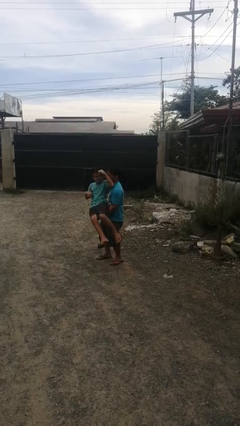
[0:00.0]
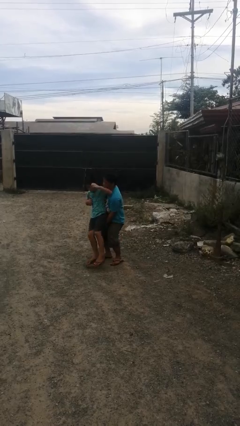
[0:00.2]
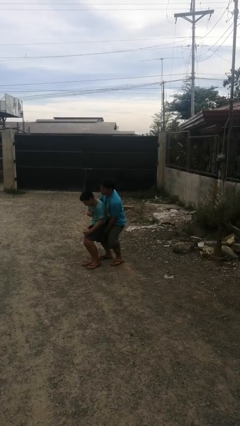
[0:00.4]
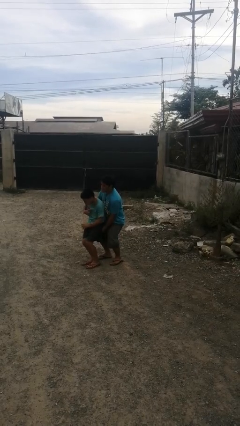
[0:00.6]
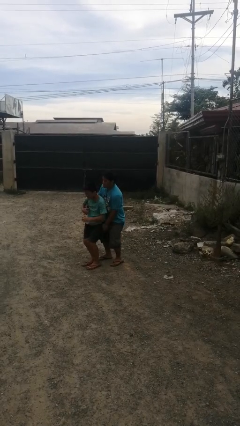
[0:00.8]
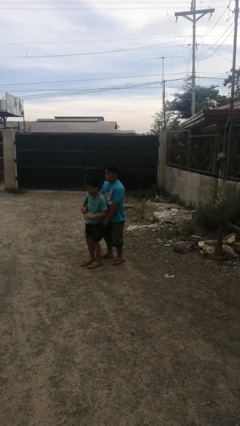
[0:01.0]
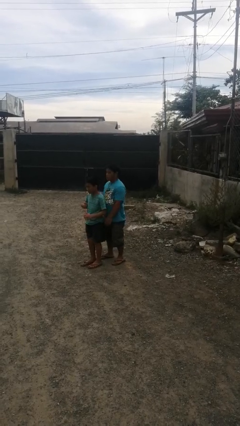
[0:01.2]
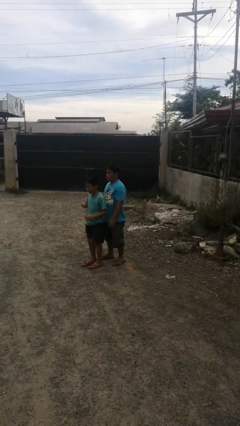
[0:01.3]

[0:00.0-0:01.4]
person puts down person

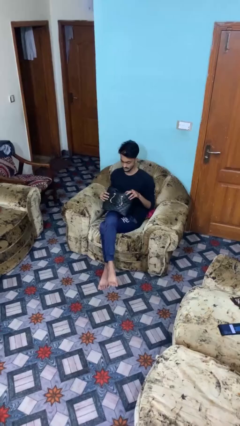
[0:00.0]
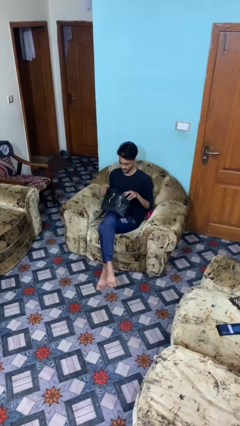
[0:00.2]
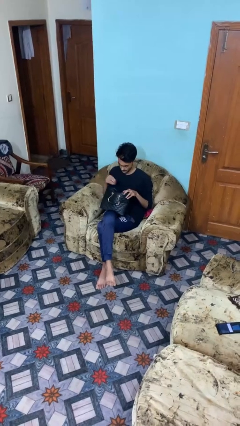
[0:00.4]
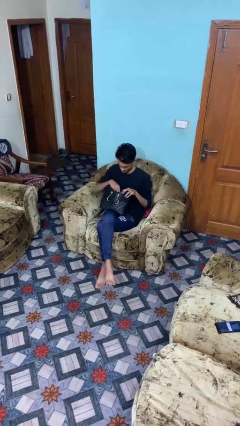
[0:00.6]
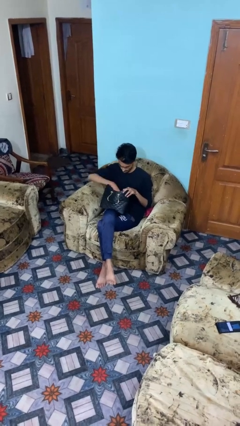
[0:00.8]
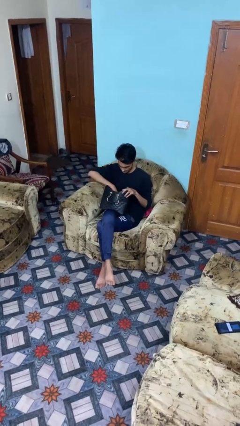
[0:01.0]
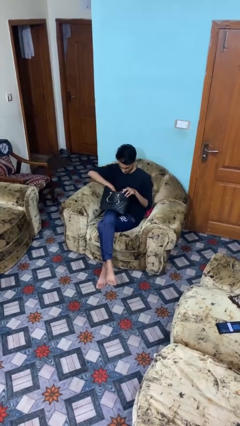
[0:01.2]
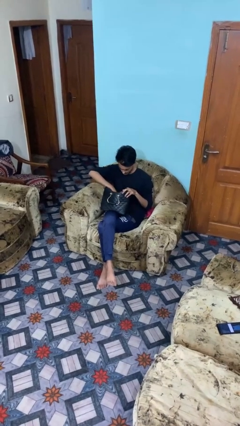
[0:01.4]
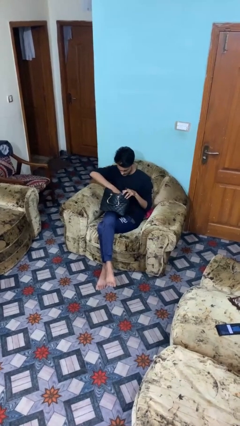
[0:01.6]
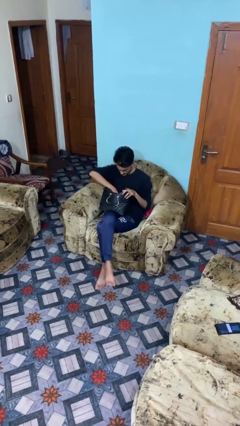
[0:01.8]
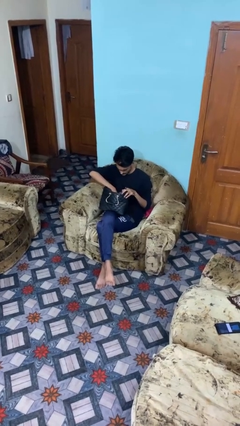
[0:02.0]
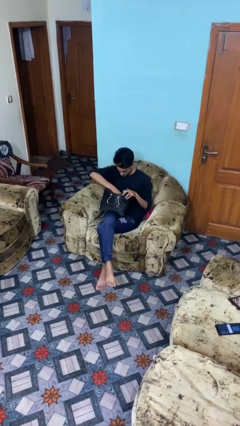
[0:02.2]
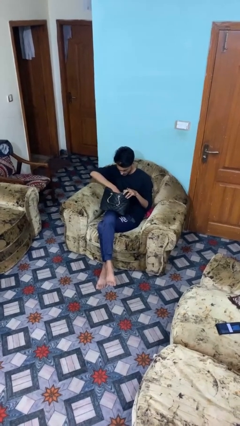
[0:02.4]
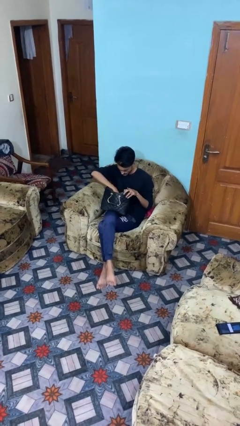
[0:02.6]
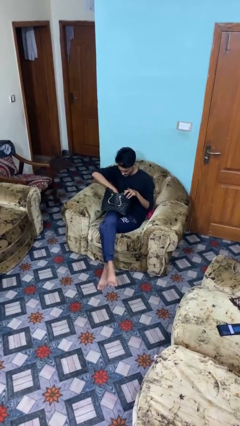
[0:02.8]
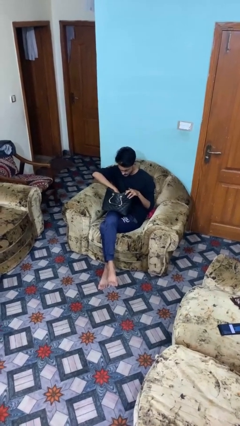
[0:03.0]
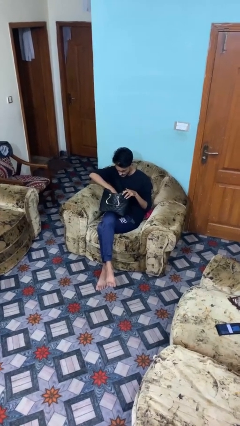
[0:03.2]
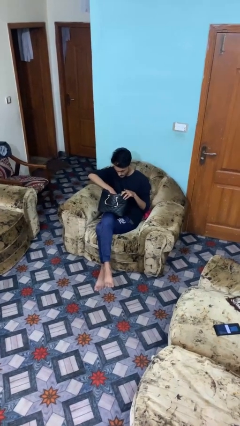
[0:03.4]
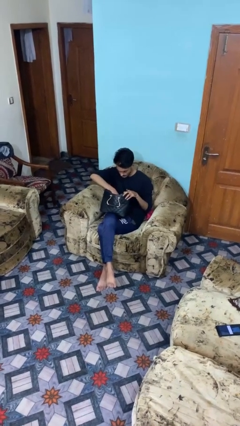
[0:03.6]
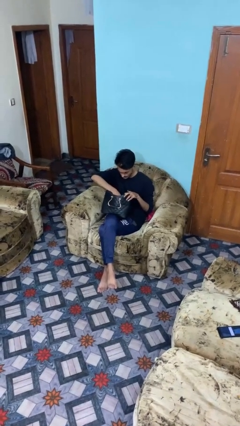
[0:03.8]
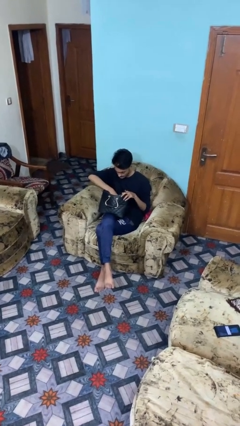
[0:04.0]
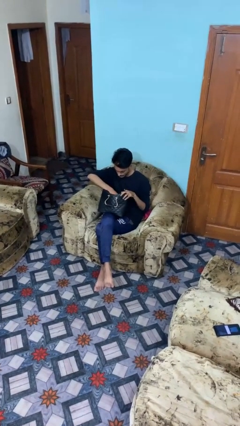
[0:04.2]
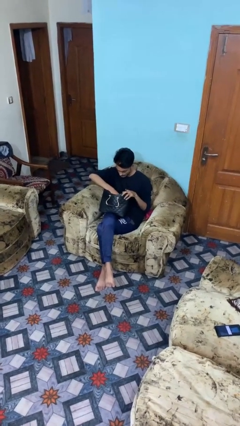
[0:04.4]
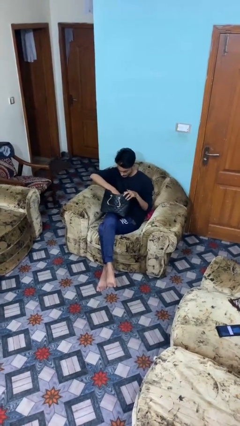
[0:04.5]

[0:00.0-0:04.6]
person searches in purse

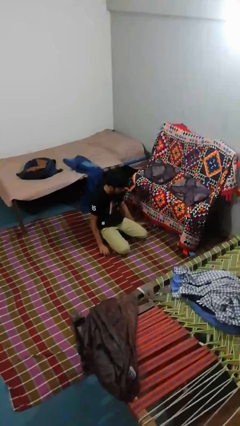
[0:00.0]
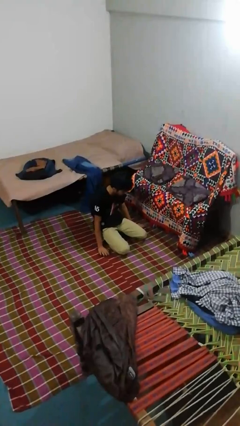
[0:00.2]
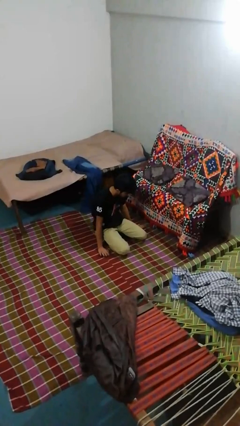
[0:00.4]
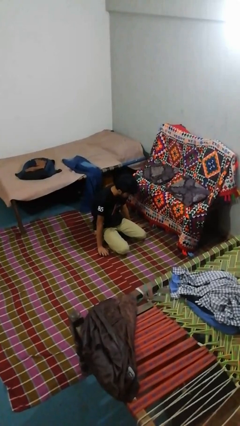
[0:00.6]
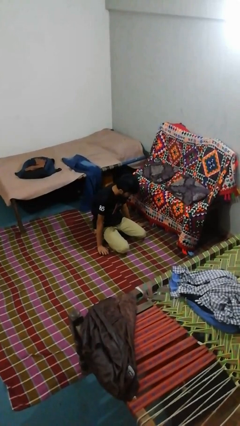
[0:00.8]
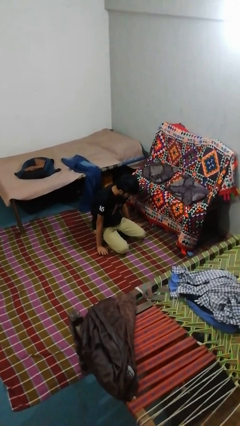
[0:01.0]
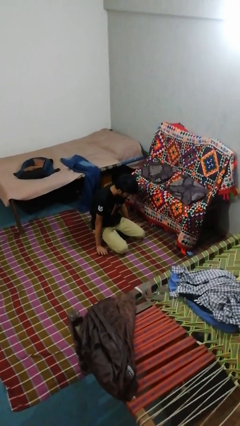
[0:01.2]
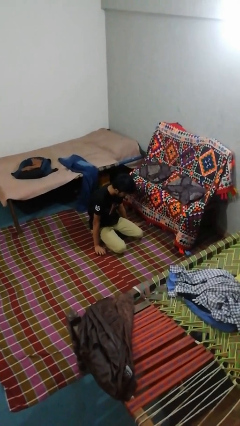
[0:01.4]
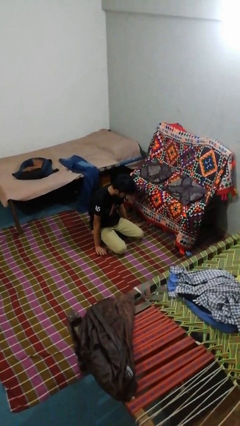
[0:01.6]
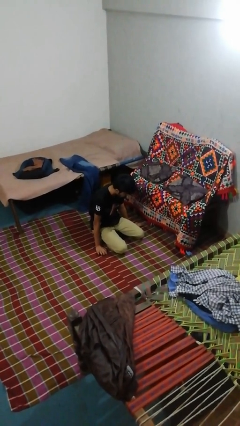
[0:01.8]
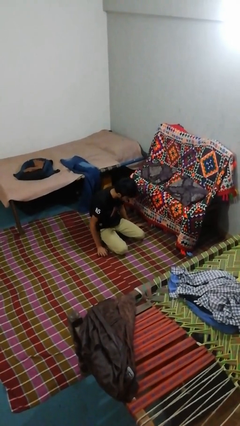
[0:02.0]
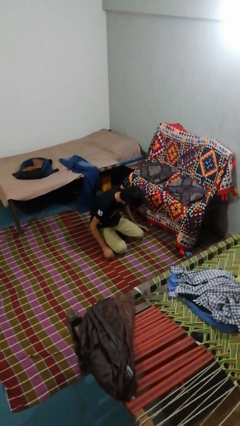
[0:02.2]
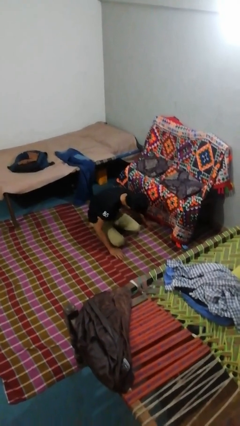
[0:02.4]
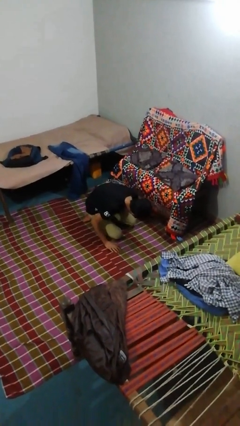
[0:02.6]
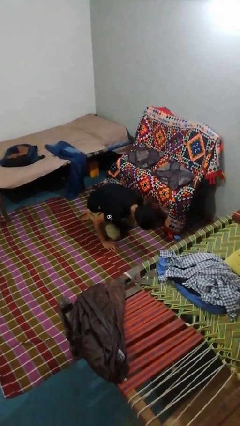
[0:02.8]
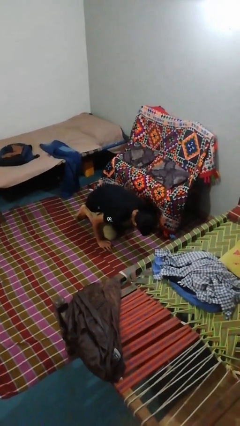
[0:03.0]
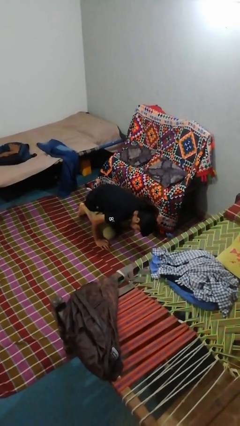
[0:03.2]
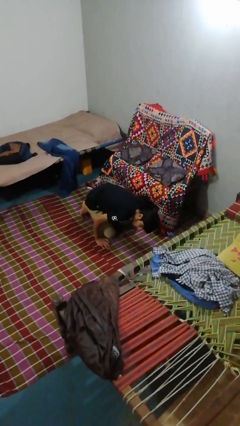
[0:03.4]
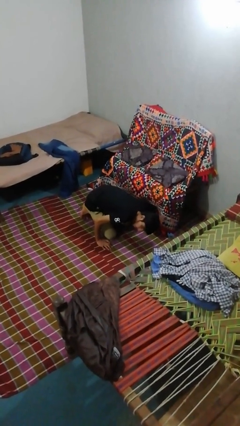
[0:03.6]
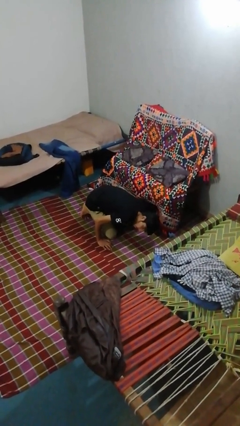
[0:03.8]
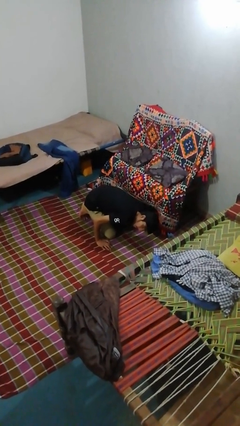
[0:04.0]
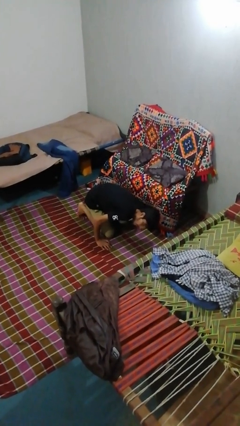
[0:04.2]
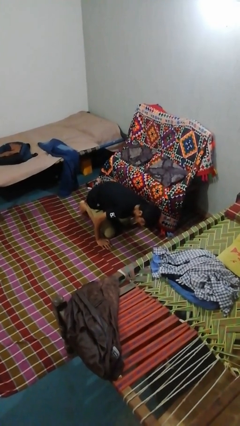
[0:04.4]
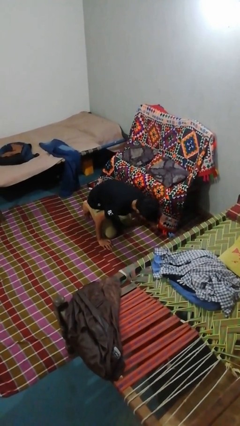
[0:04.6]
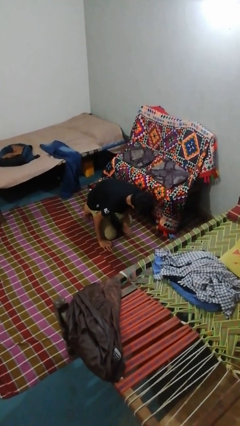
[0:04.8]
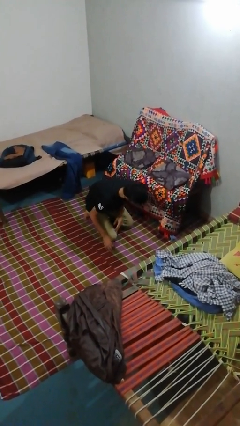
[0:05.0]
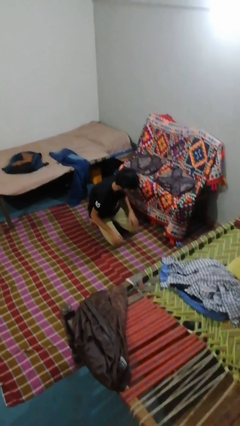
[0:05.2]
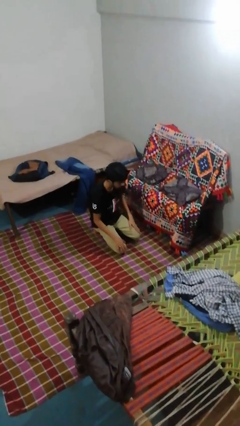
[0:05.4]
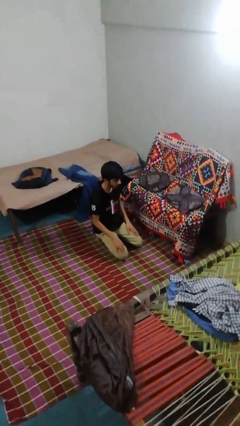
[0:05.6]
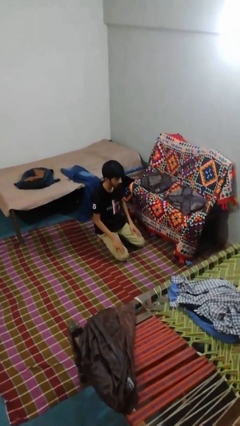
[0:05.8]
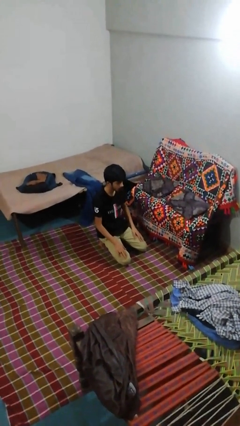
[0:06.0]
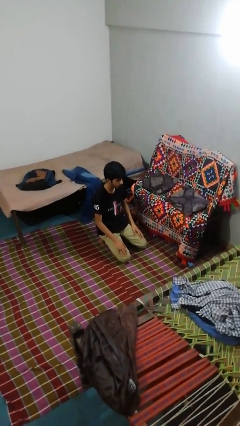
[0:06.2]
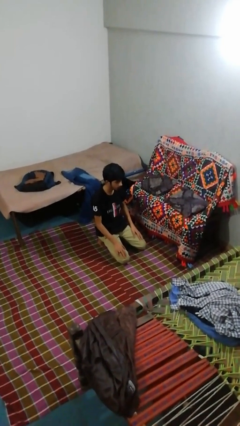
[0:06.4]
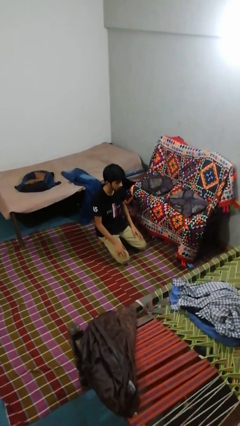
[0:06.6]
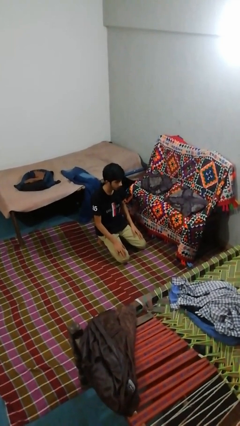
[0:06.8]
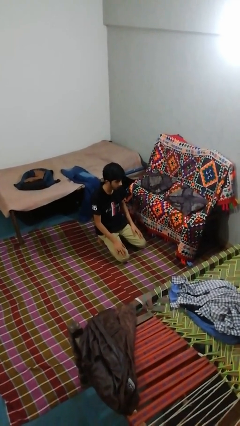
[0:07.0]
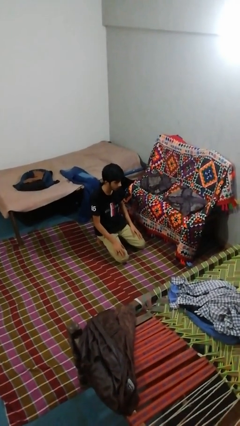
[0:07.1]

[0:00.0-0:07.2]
person searches under couch

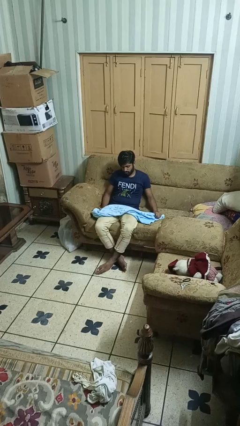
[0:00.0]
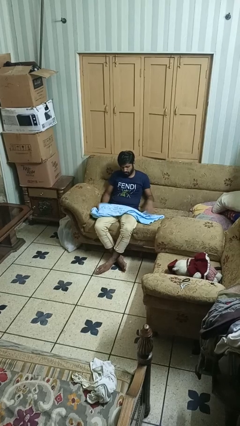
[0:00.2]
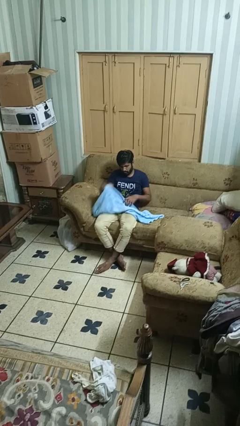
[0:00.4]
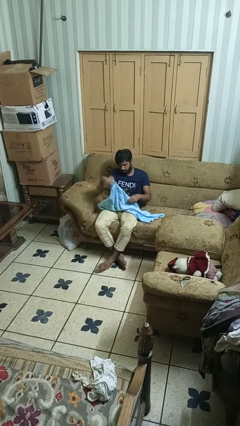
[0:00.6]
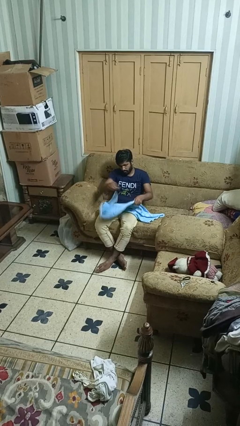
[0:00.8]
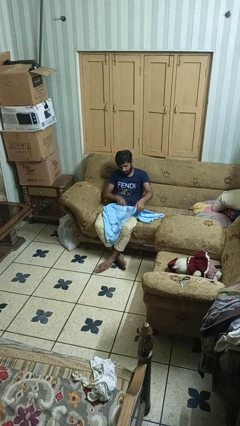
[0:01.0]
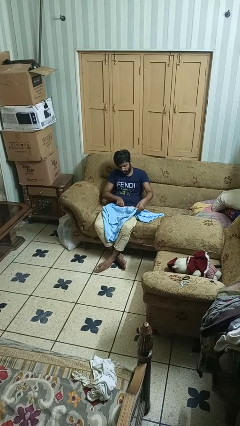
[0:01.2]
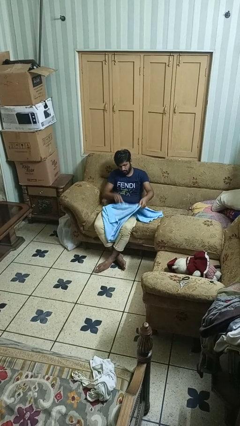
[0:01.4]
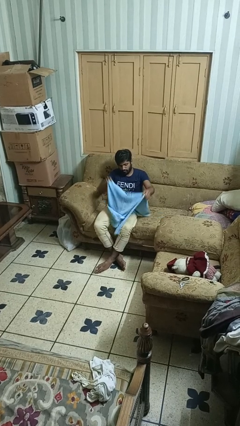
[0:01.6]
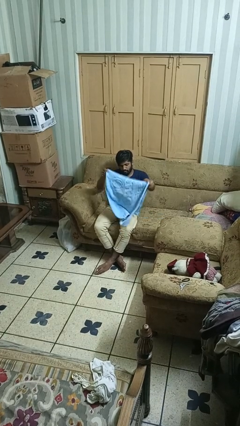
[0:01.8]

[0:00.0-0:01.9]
person folds towel

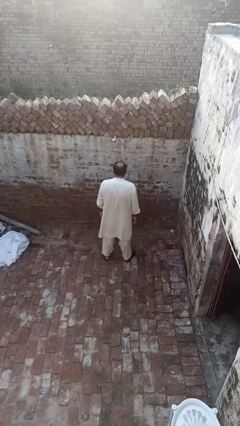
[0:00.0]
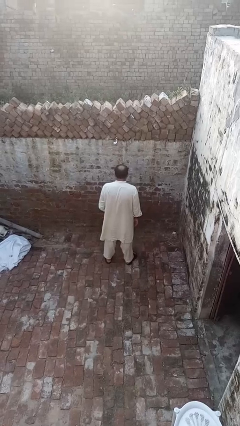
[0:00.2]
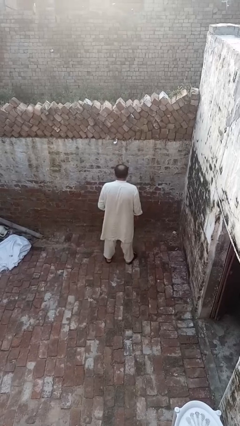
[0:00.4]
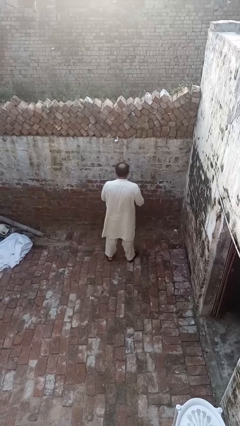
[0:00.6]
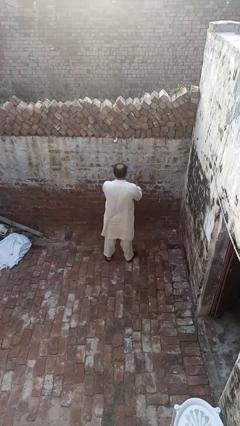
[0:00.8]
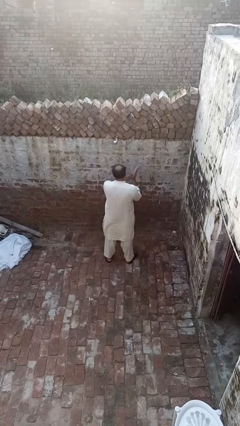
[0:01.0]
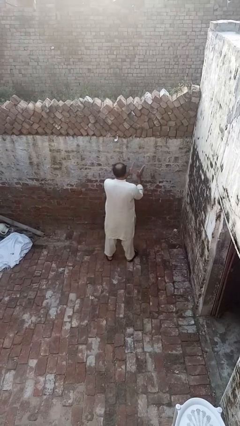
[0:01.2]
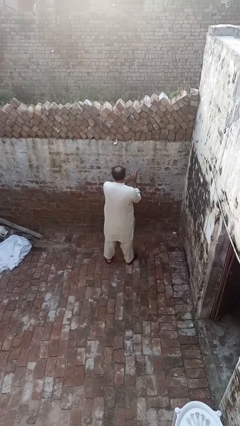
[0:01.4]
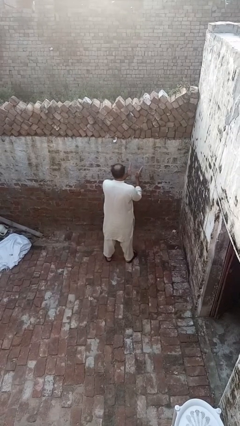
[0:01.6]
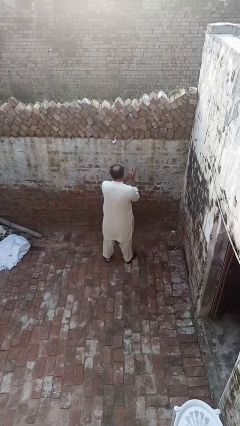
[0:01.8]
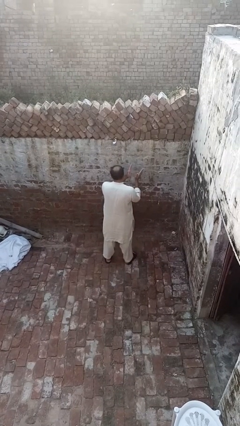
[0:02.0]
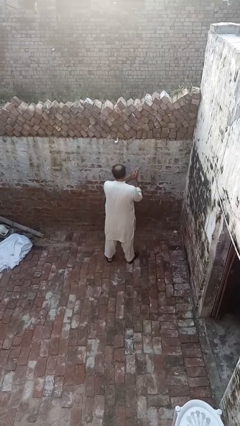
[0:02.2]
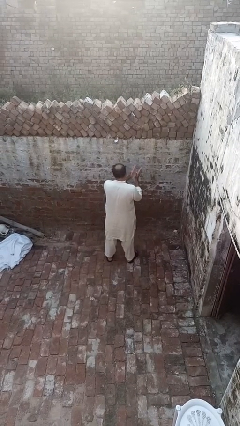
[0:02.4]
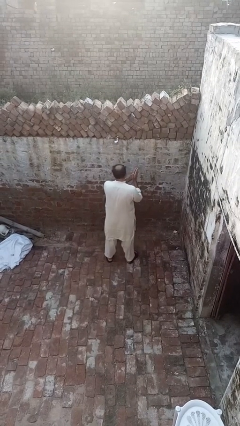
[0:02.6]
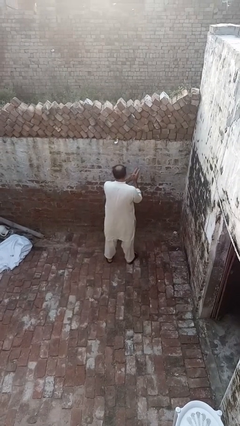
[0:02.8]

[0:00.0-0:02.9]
person claps hands
